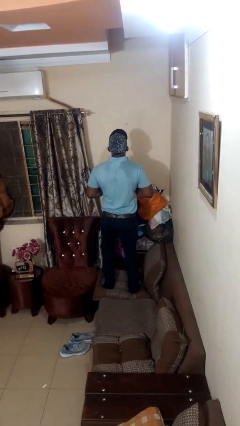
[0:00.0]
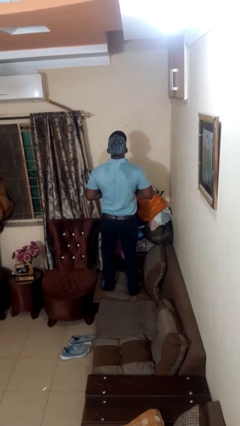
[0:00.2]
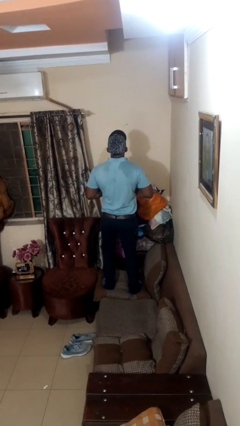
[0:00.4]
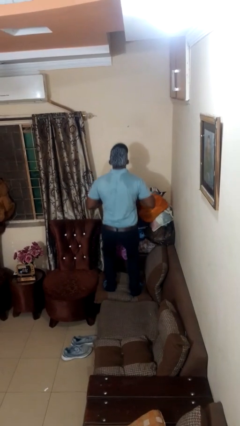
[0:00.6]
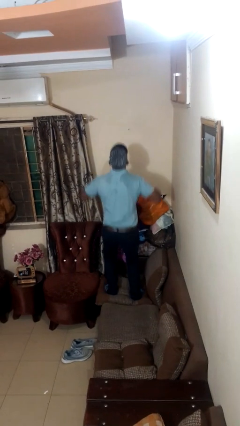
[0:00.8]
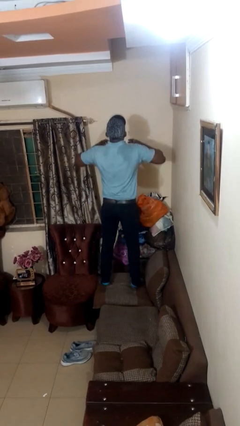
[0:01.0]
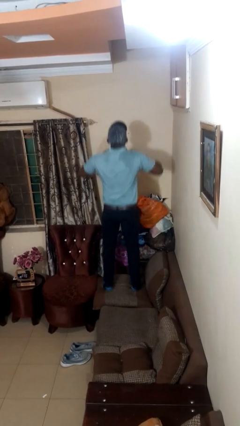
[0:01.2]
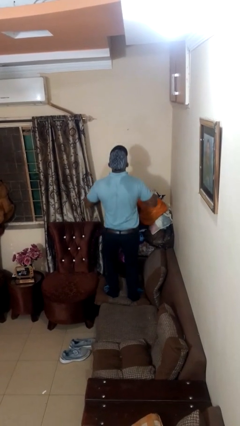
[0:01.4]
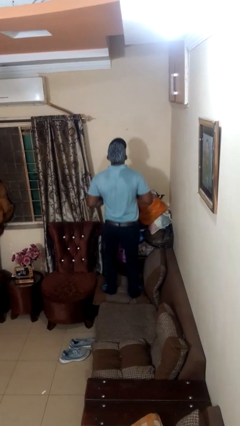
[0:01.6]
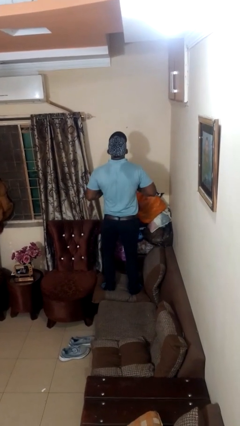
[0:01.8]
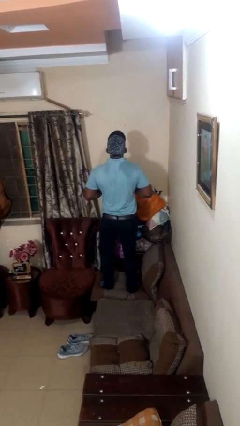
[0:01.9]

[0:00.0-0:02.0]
person jumps on couch

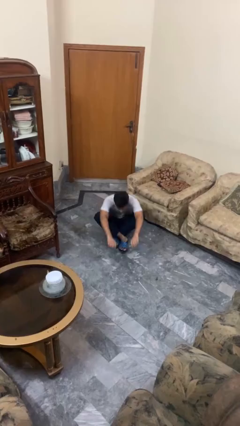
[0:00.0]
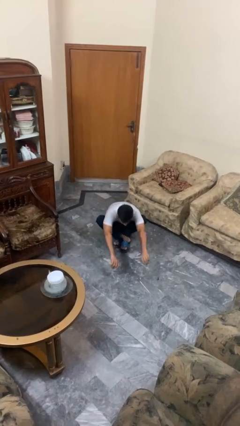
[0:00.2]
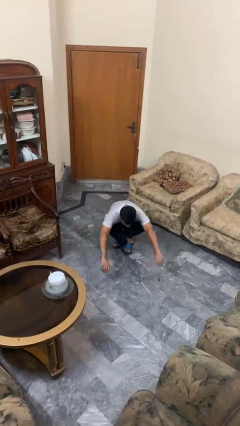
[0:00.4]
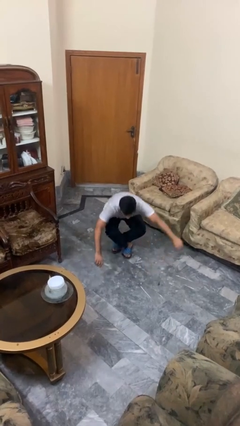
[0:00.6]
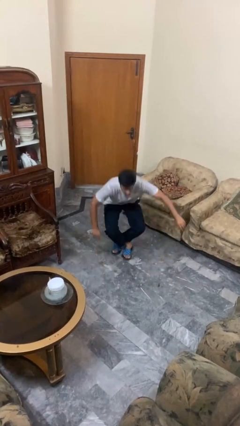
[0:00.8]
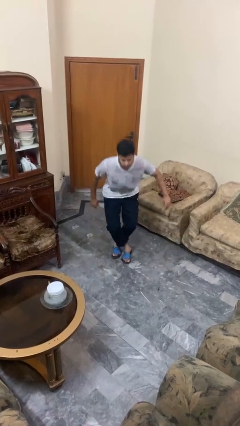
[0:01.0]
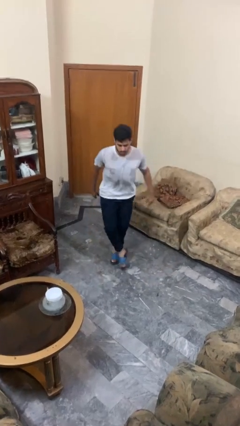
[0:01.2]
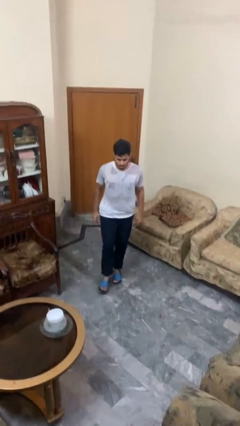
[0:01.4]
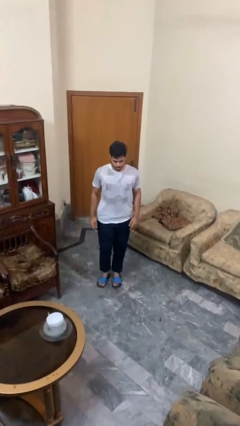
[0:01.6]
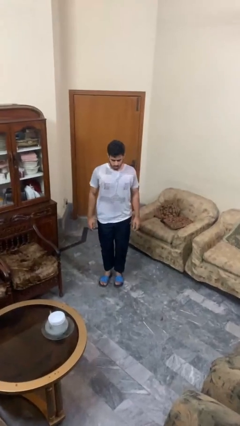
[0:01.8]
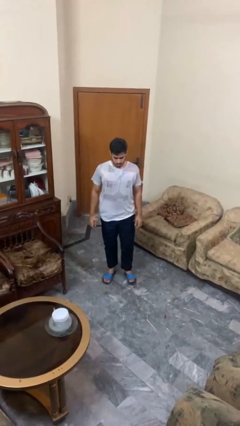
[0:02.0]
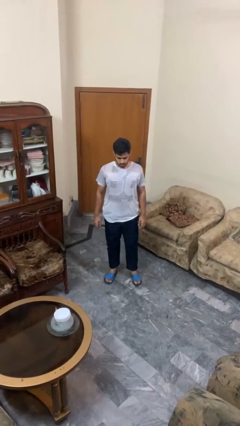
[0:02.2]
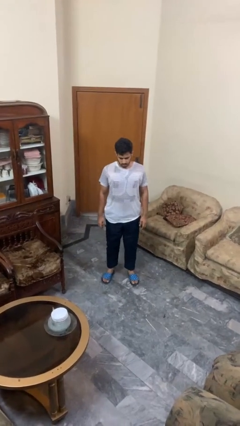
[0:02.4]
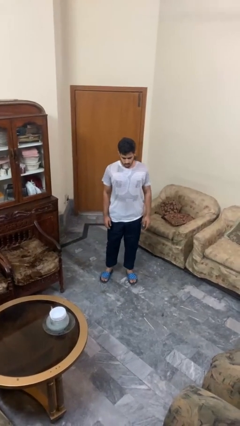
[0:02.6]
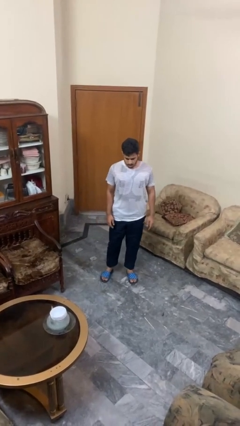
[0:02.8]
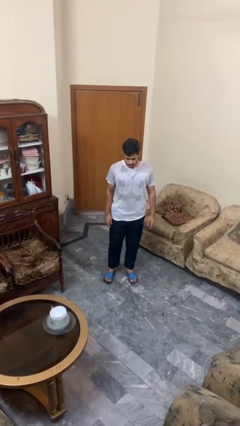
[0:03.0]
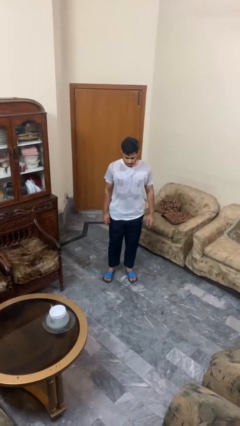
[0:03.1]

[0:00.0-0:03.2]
person stands up from floor

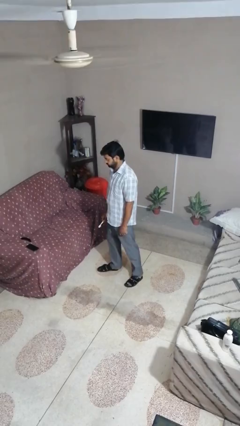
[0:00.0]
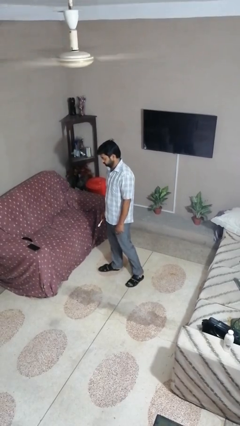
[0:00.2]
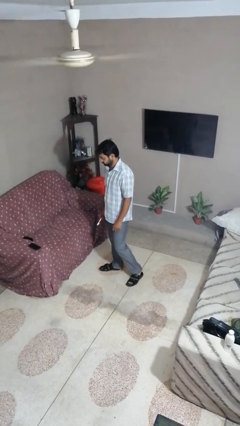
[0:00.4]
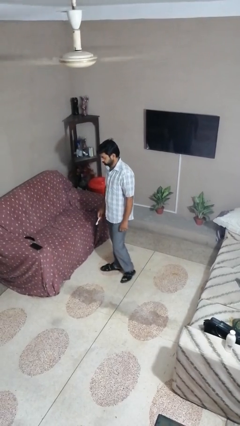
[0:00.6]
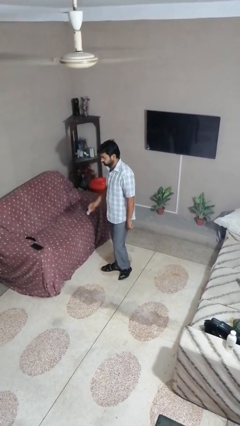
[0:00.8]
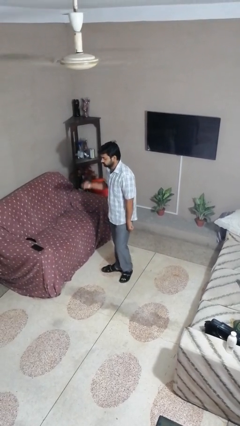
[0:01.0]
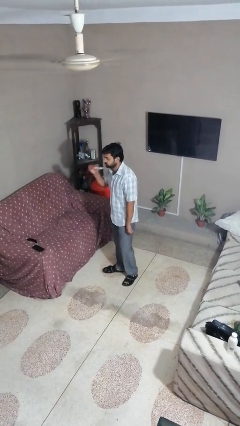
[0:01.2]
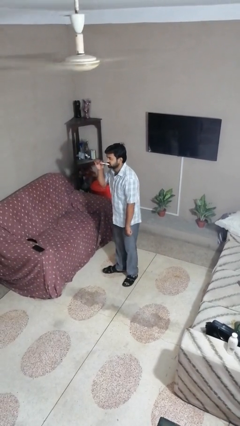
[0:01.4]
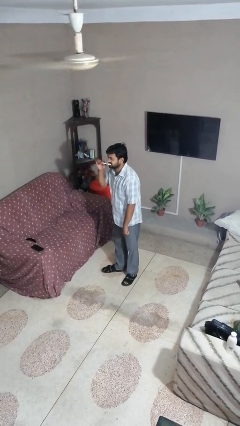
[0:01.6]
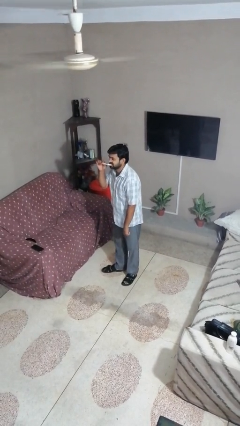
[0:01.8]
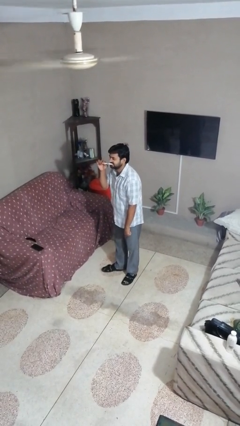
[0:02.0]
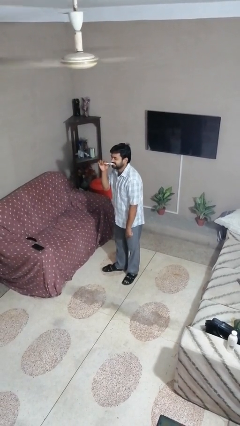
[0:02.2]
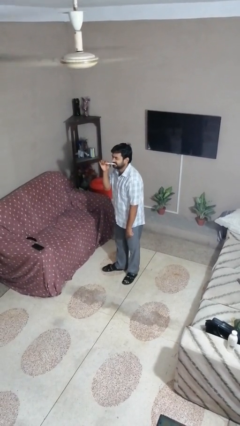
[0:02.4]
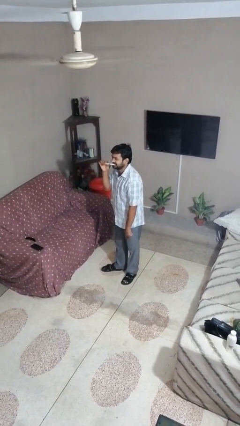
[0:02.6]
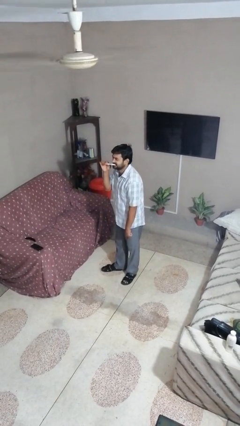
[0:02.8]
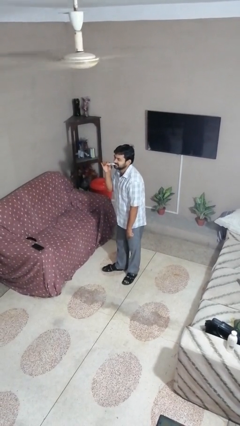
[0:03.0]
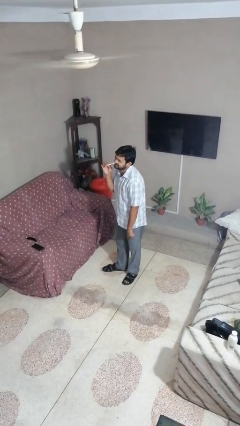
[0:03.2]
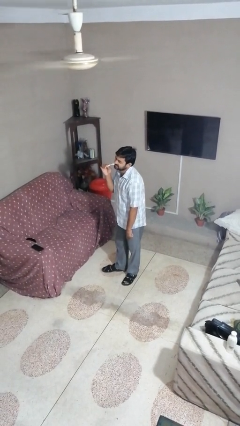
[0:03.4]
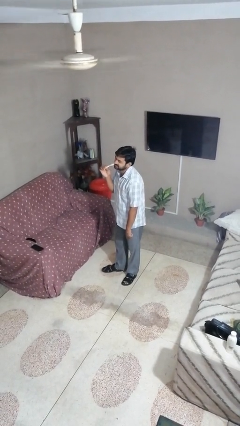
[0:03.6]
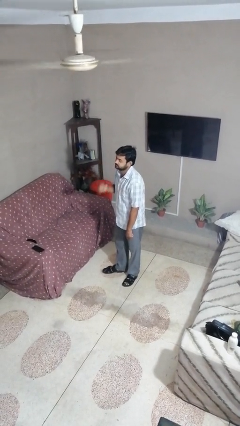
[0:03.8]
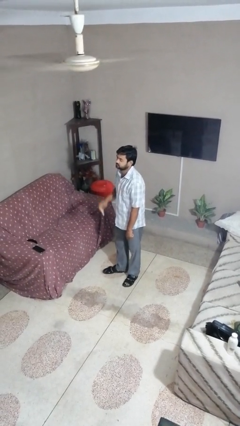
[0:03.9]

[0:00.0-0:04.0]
person brushes teeth

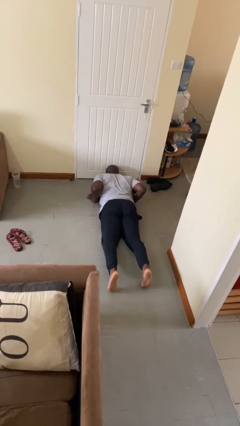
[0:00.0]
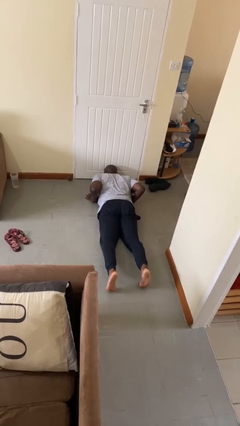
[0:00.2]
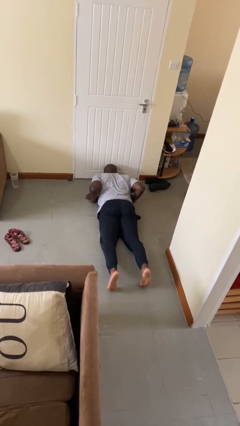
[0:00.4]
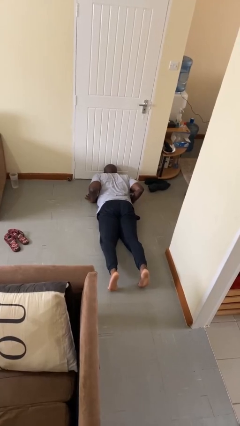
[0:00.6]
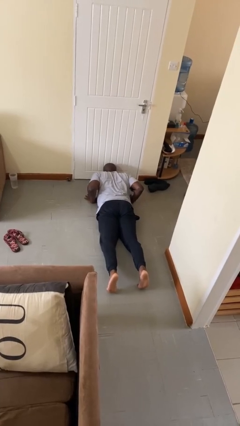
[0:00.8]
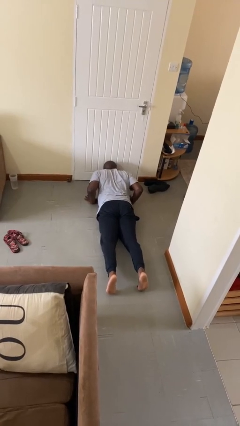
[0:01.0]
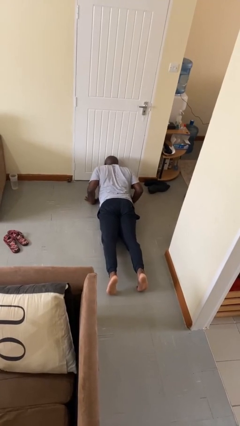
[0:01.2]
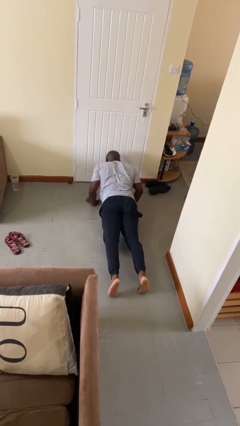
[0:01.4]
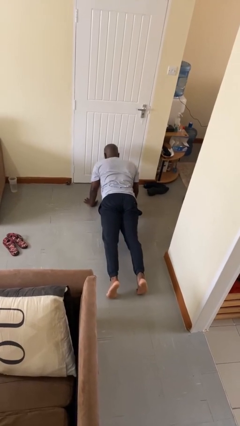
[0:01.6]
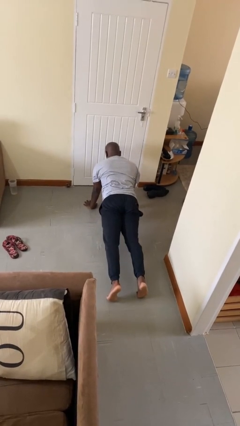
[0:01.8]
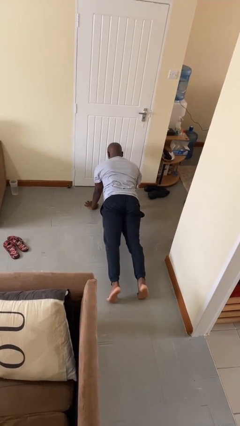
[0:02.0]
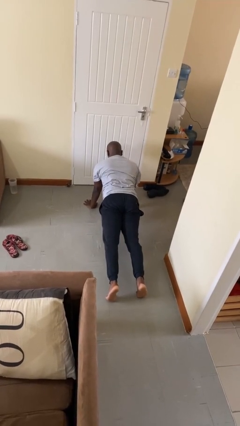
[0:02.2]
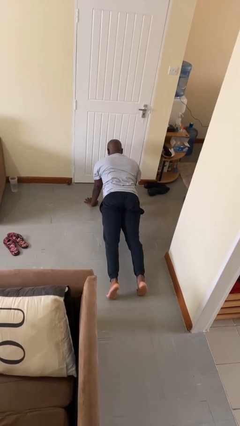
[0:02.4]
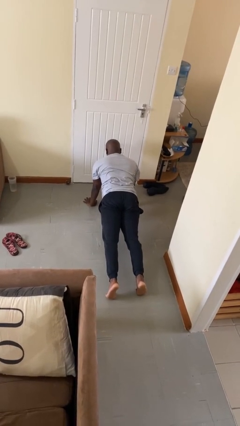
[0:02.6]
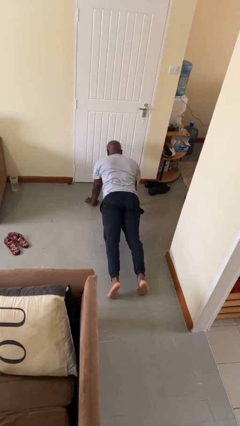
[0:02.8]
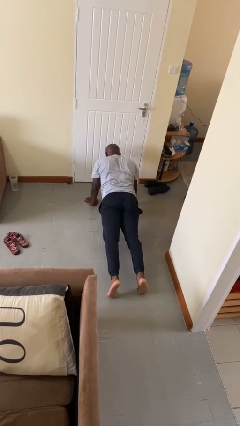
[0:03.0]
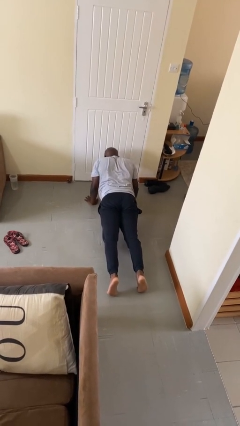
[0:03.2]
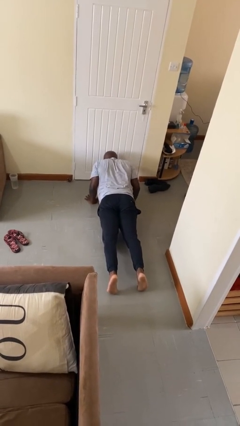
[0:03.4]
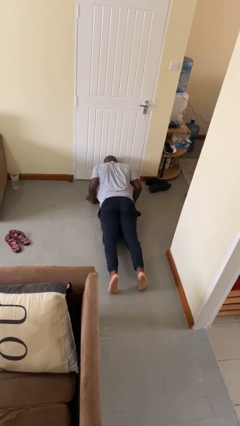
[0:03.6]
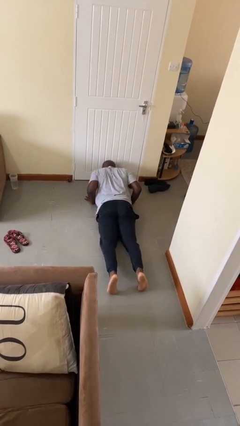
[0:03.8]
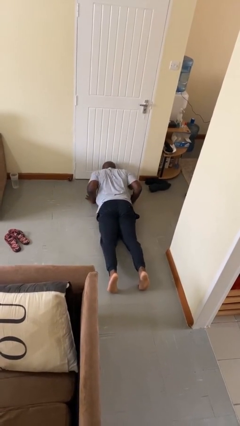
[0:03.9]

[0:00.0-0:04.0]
person exercises with pushup

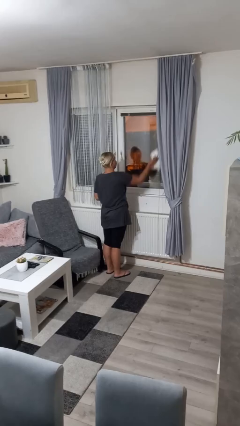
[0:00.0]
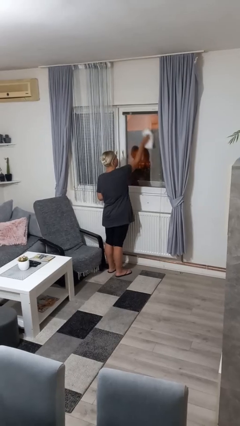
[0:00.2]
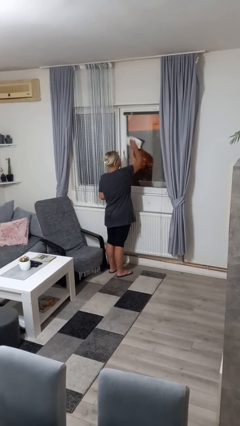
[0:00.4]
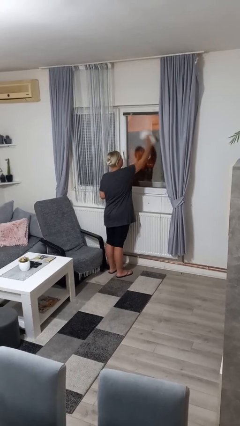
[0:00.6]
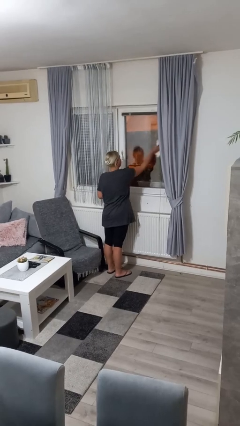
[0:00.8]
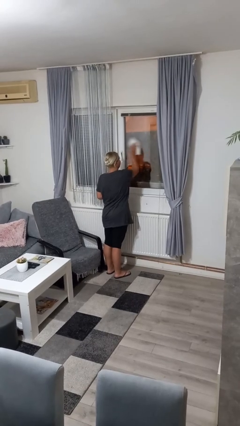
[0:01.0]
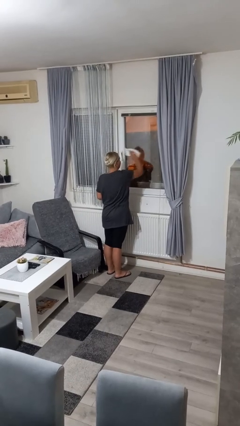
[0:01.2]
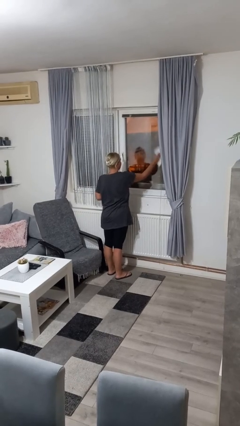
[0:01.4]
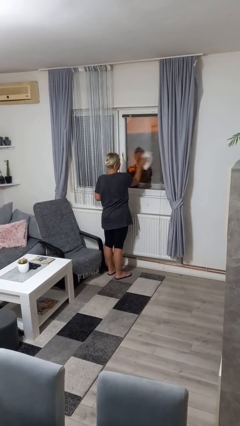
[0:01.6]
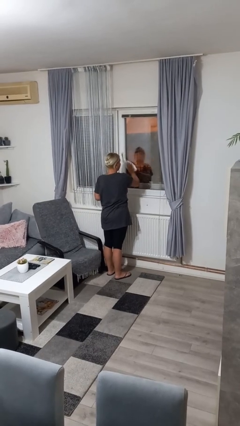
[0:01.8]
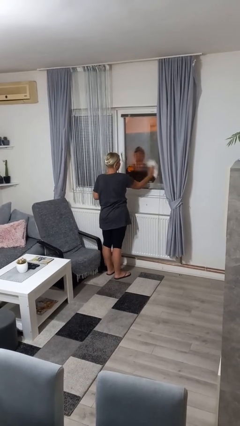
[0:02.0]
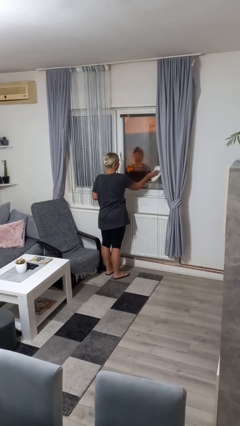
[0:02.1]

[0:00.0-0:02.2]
person washes window

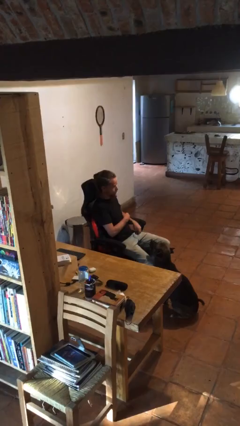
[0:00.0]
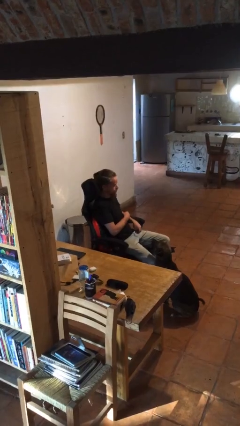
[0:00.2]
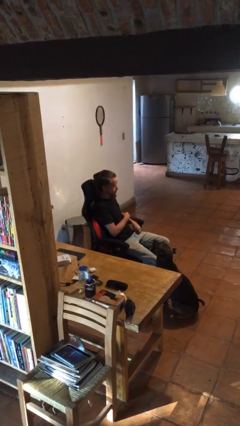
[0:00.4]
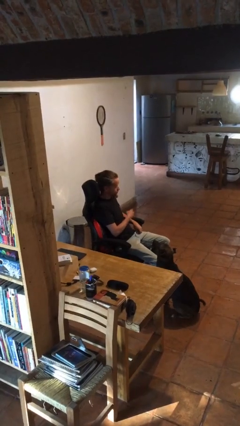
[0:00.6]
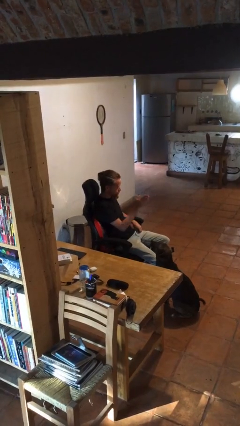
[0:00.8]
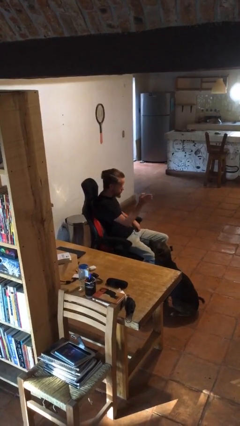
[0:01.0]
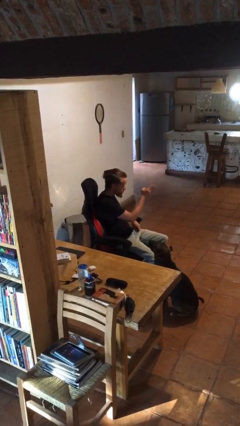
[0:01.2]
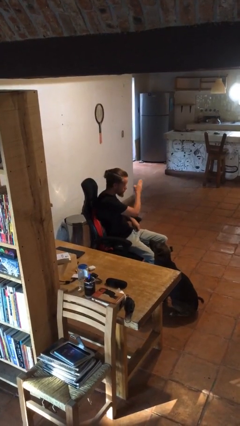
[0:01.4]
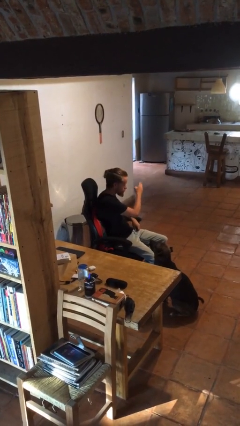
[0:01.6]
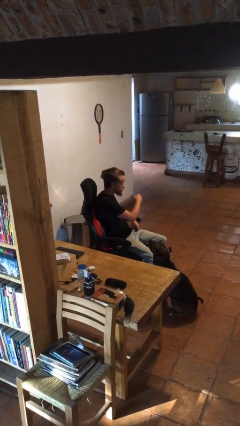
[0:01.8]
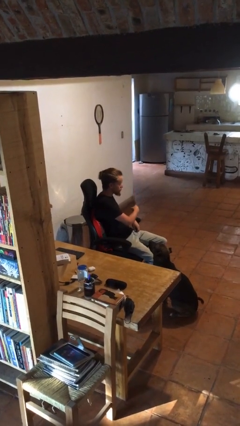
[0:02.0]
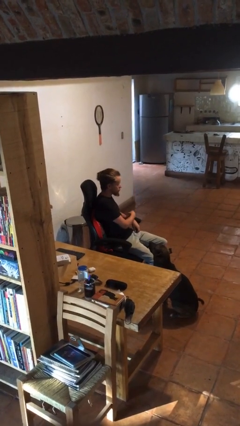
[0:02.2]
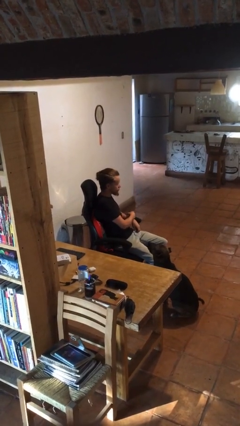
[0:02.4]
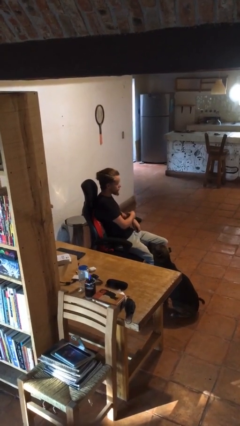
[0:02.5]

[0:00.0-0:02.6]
person gestures swipe left
